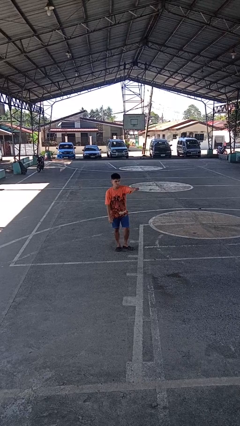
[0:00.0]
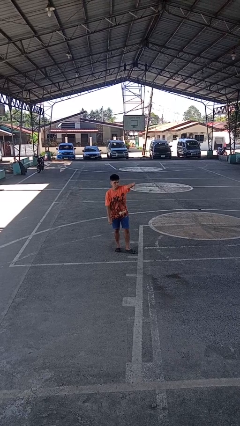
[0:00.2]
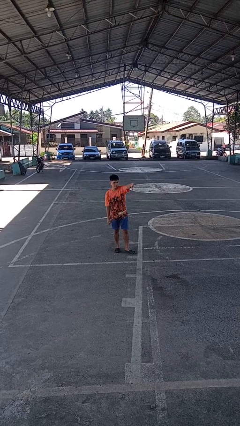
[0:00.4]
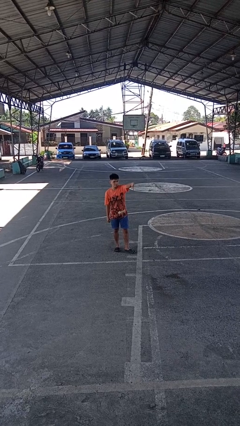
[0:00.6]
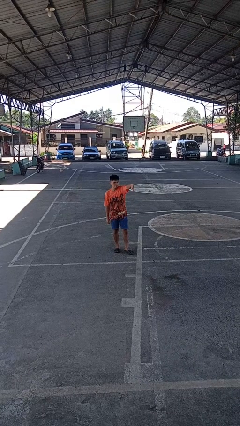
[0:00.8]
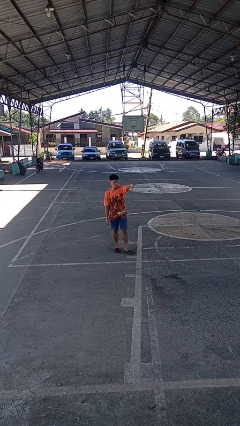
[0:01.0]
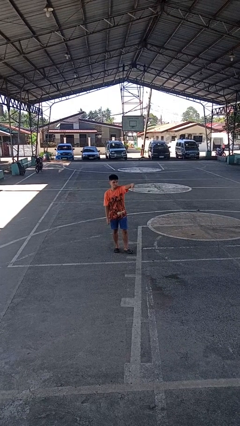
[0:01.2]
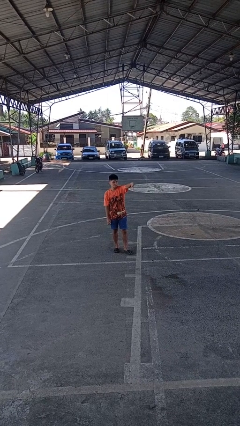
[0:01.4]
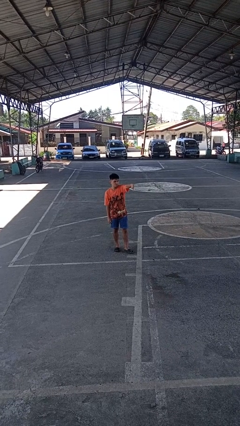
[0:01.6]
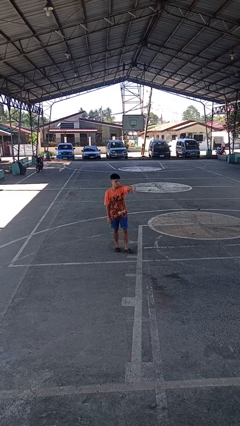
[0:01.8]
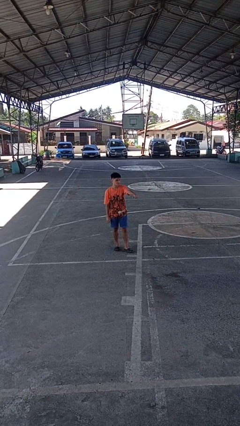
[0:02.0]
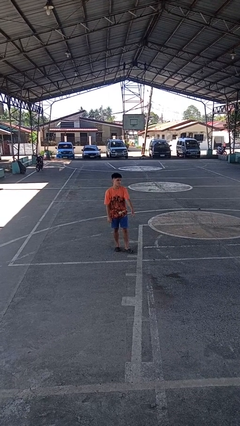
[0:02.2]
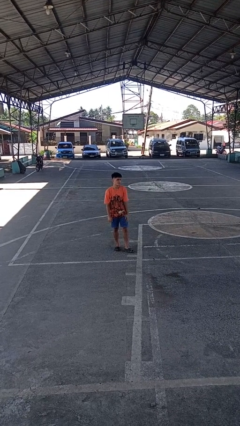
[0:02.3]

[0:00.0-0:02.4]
person gestures thumbs down

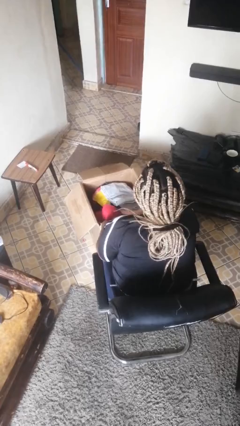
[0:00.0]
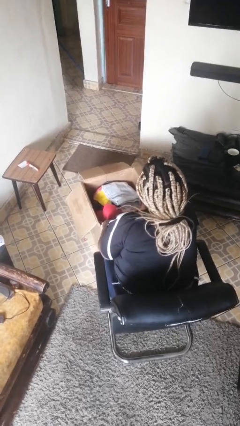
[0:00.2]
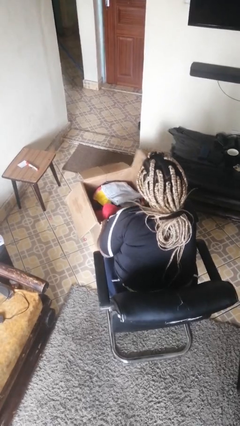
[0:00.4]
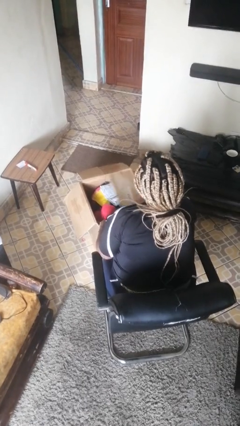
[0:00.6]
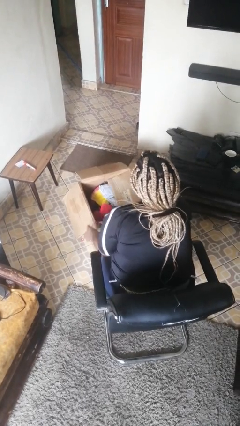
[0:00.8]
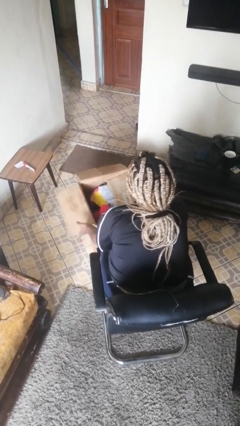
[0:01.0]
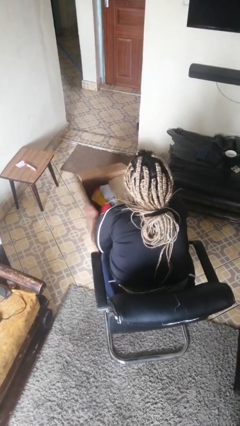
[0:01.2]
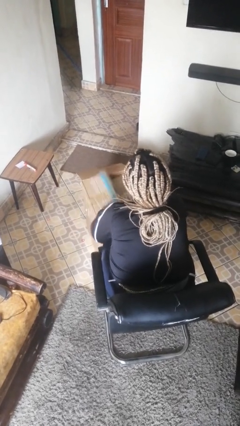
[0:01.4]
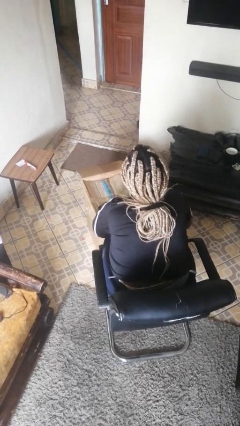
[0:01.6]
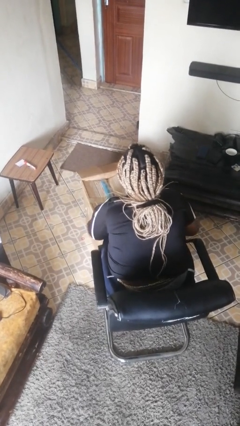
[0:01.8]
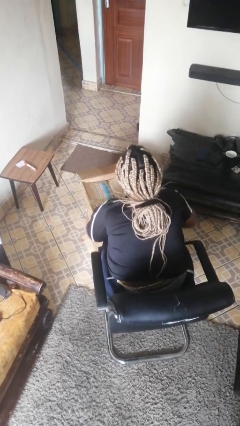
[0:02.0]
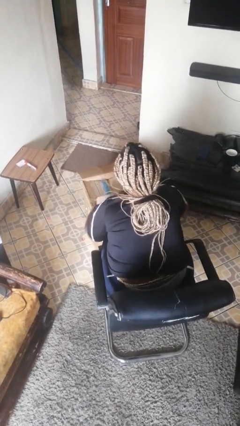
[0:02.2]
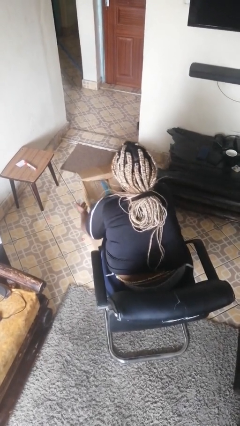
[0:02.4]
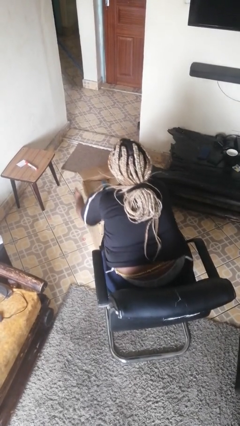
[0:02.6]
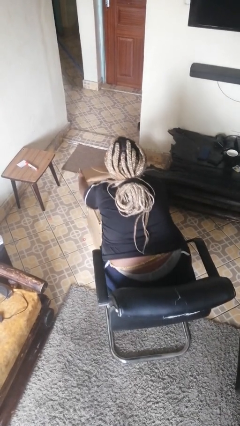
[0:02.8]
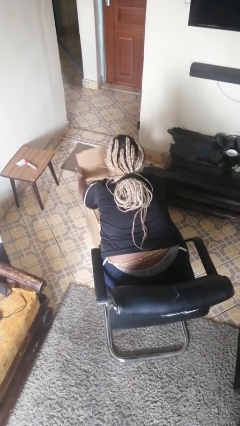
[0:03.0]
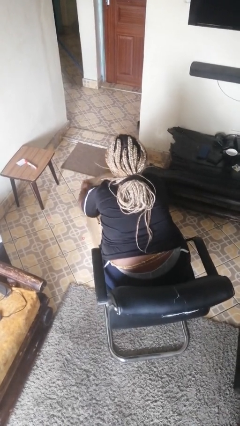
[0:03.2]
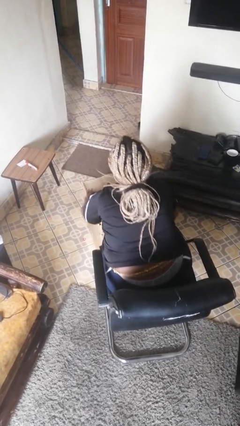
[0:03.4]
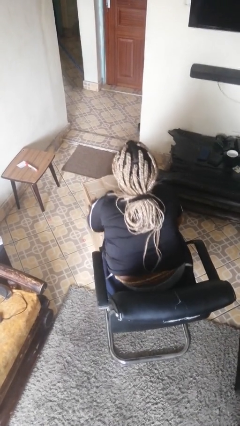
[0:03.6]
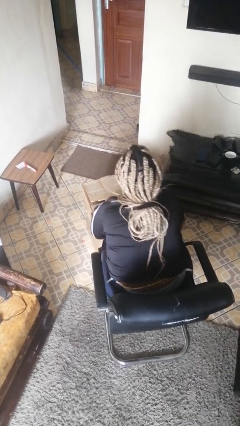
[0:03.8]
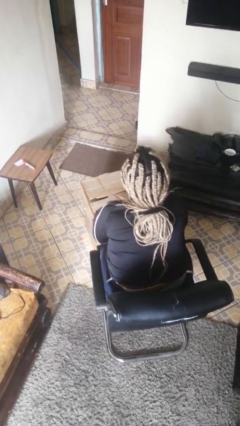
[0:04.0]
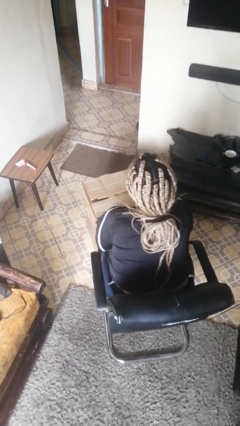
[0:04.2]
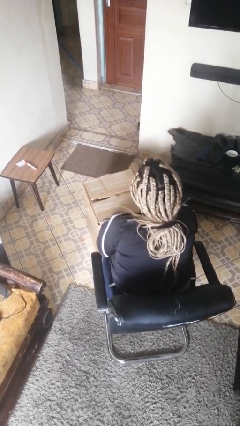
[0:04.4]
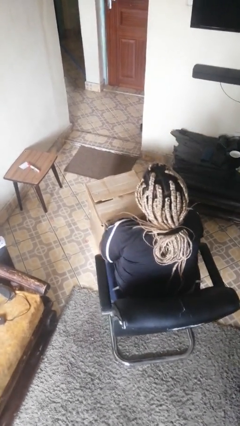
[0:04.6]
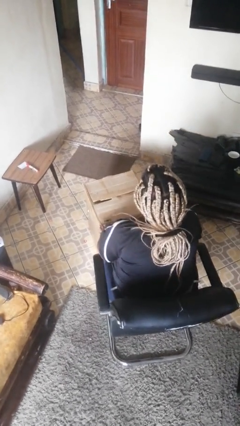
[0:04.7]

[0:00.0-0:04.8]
person closes box

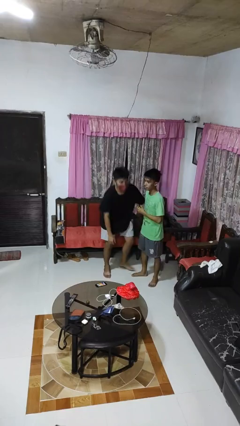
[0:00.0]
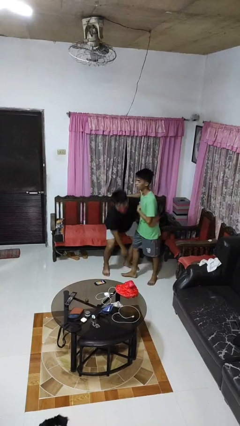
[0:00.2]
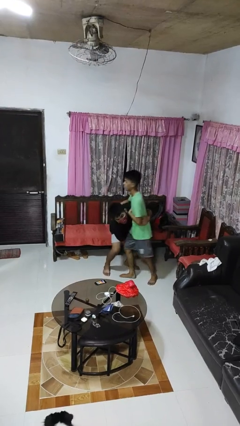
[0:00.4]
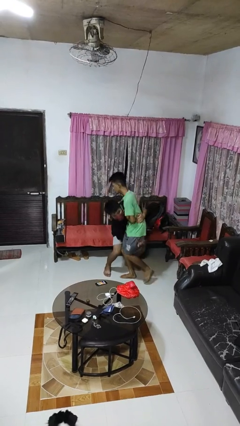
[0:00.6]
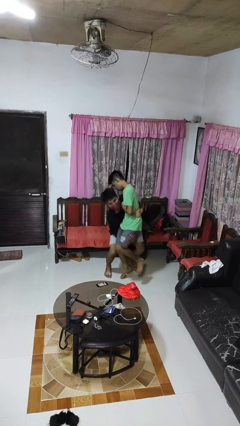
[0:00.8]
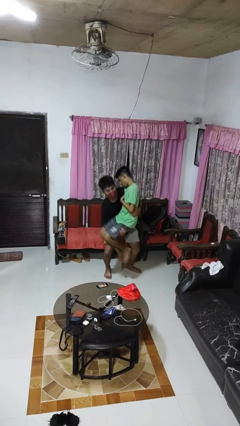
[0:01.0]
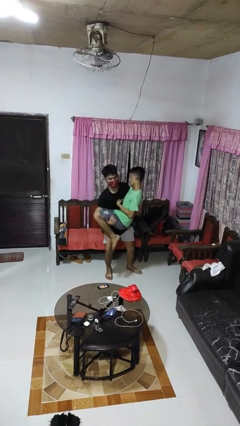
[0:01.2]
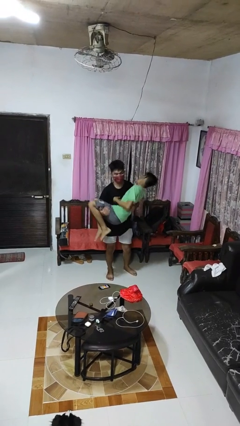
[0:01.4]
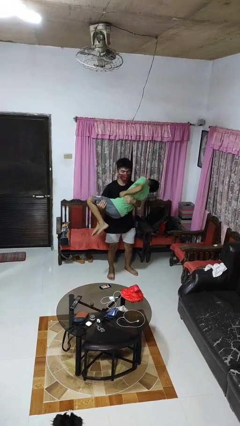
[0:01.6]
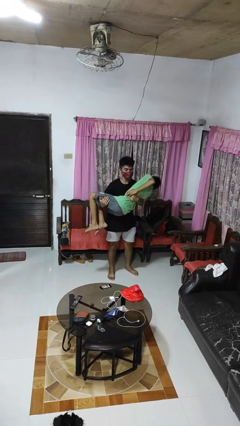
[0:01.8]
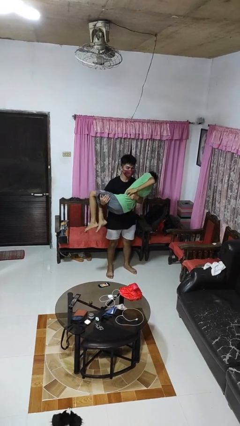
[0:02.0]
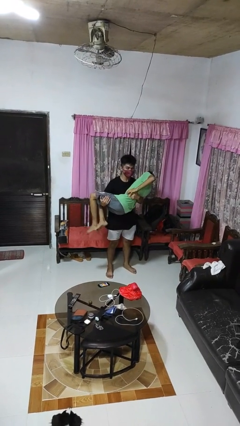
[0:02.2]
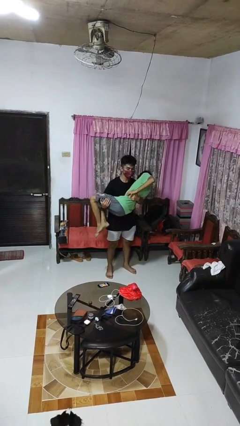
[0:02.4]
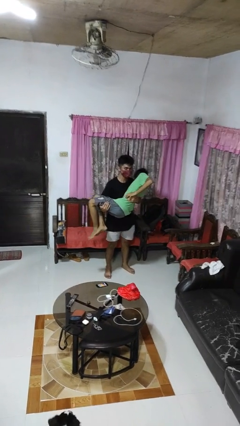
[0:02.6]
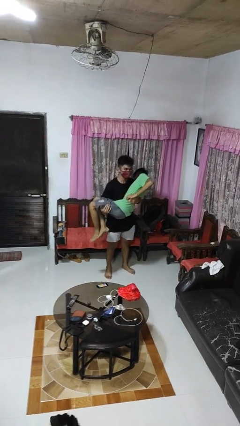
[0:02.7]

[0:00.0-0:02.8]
person picks up person

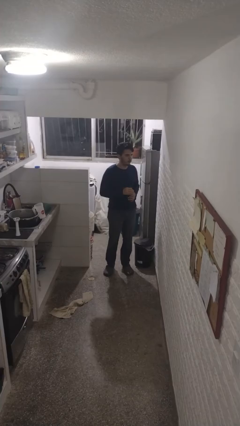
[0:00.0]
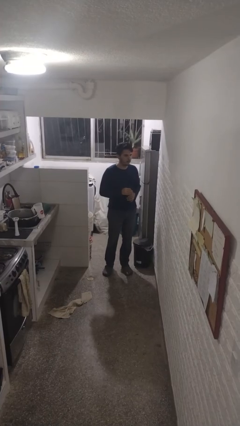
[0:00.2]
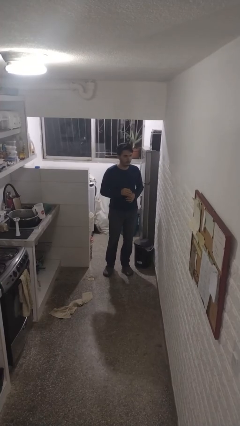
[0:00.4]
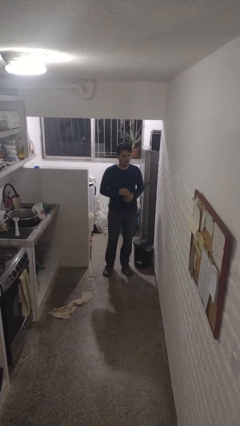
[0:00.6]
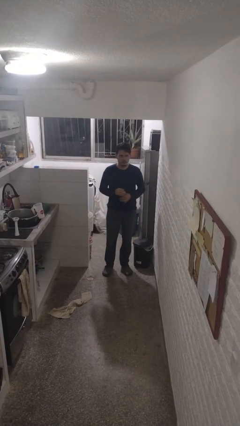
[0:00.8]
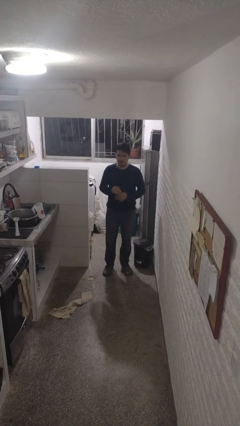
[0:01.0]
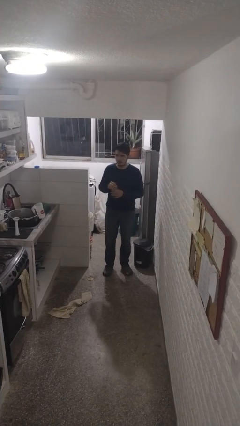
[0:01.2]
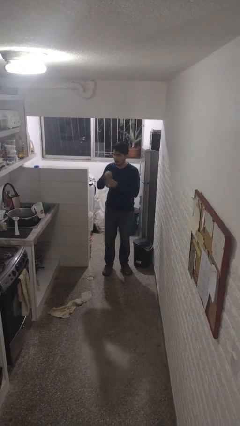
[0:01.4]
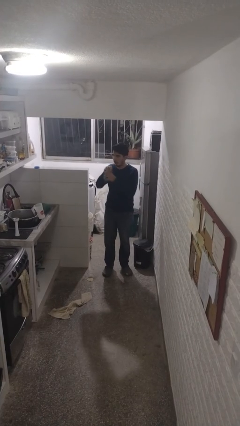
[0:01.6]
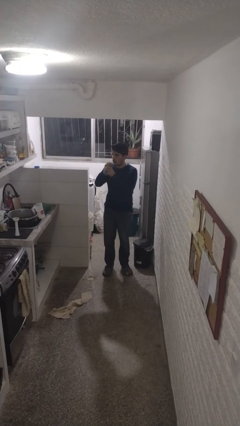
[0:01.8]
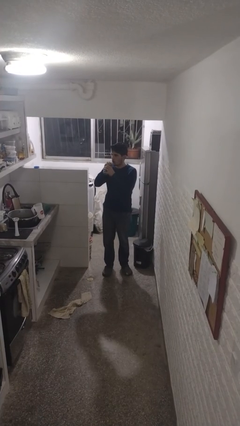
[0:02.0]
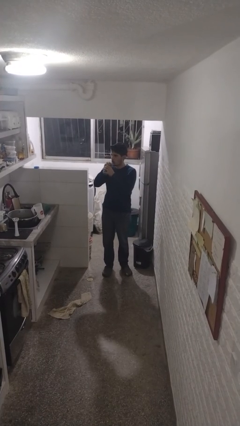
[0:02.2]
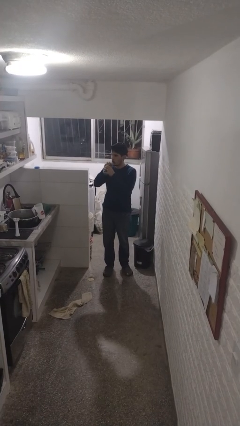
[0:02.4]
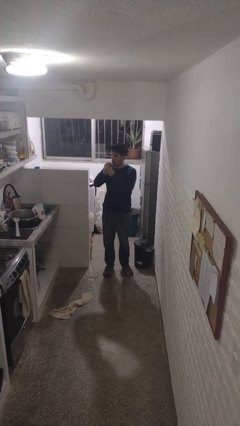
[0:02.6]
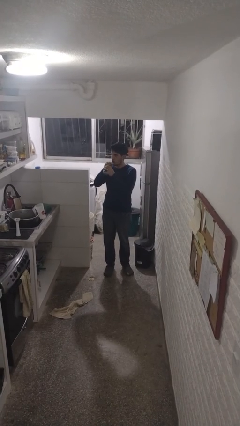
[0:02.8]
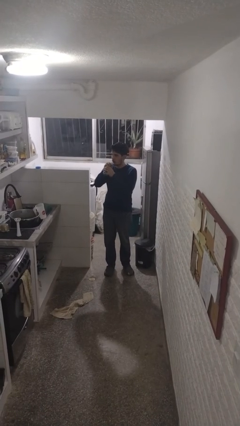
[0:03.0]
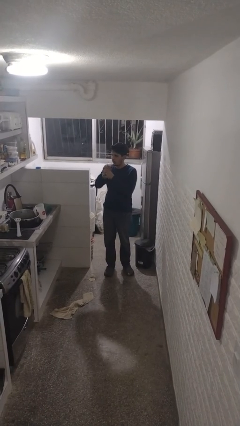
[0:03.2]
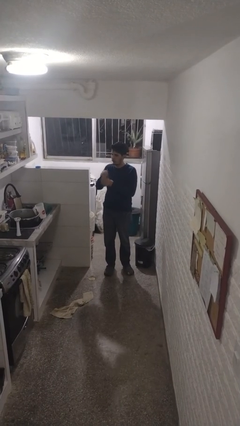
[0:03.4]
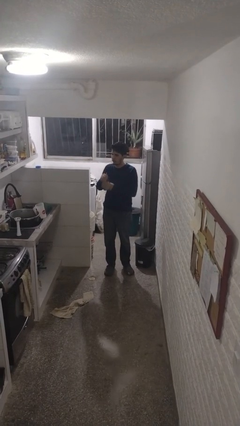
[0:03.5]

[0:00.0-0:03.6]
person drinks from straw

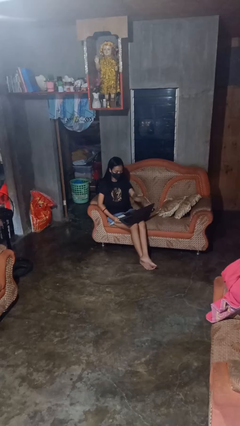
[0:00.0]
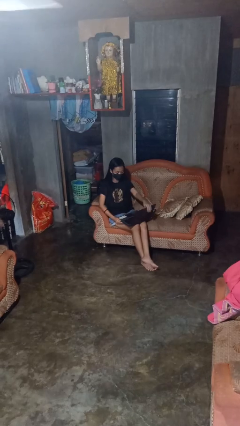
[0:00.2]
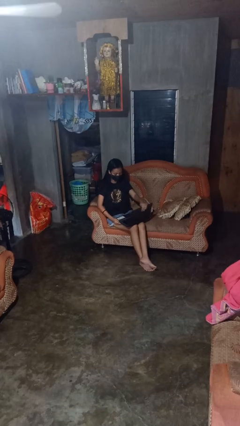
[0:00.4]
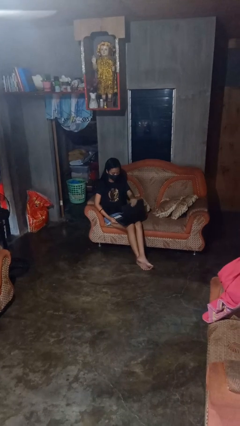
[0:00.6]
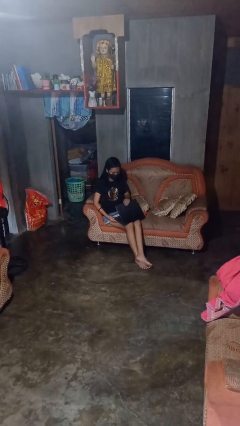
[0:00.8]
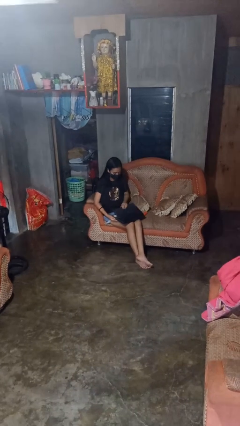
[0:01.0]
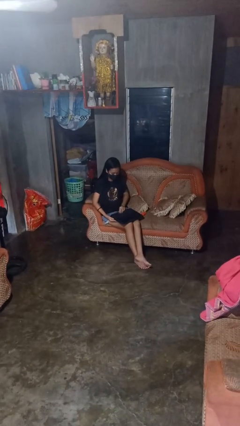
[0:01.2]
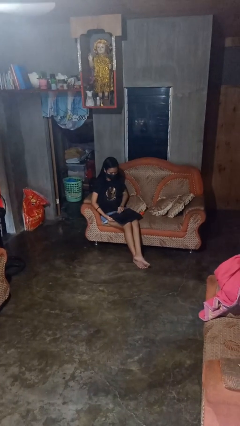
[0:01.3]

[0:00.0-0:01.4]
person closes laptop

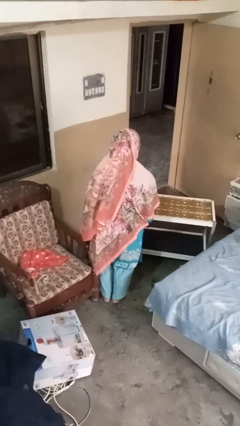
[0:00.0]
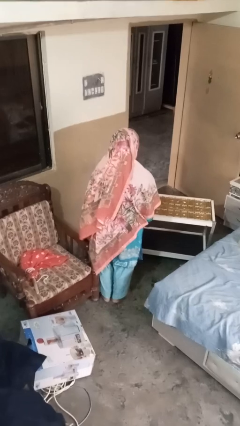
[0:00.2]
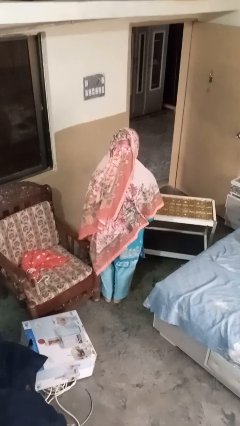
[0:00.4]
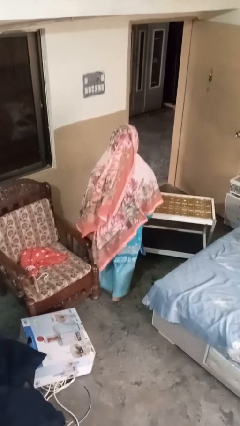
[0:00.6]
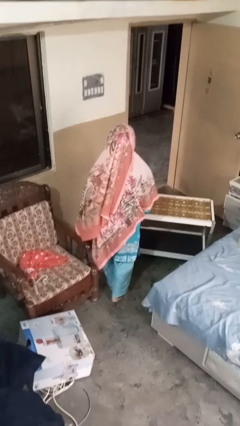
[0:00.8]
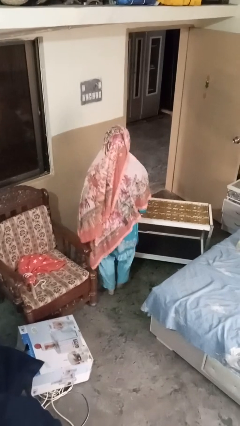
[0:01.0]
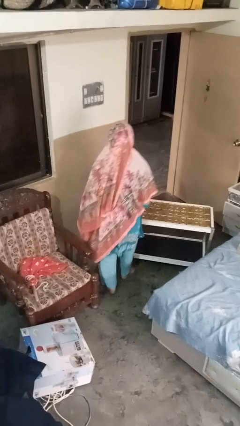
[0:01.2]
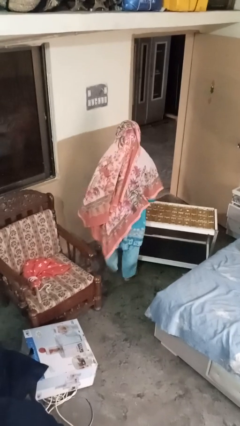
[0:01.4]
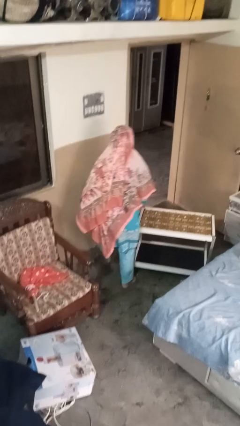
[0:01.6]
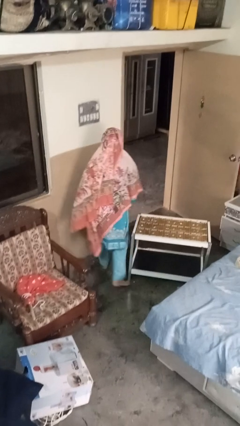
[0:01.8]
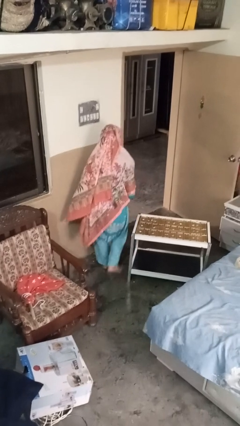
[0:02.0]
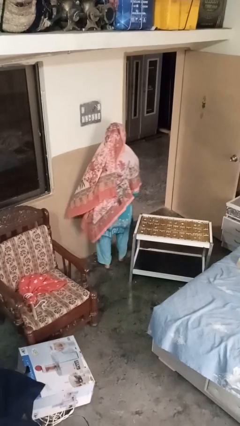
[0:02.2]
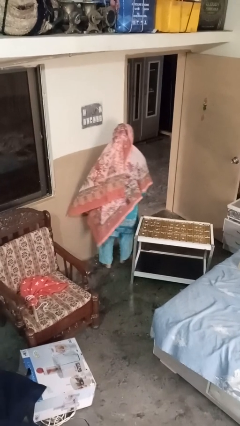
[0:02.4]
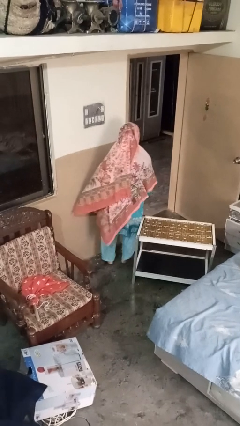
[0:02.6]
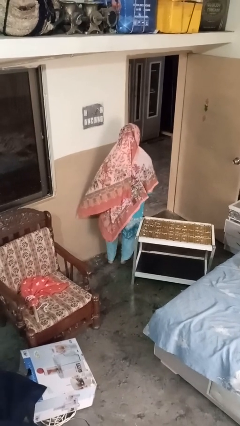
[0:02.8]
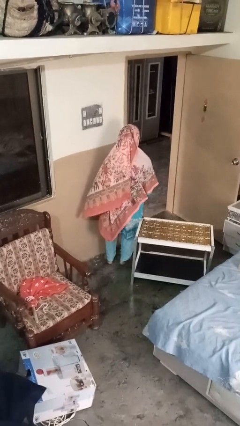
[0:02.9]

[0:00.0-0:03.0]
person bumps into table
